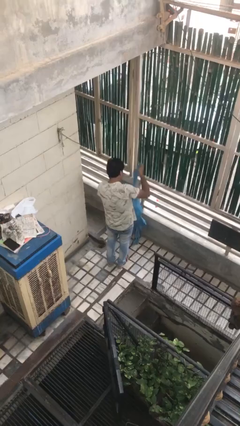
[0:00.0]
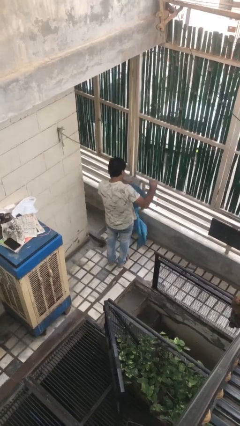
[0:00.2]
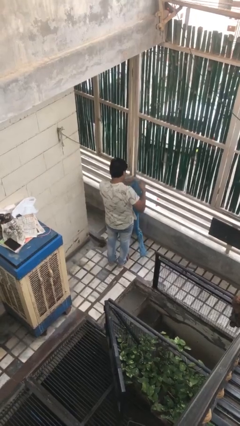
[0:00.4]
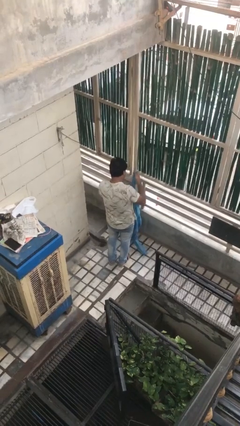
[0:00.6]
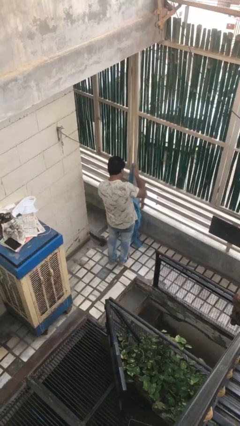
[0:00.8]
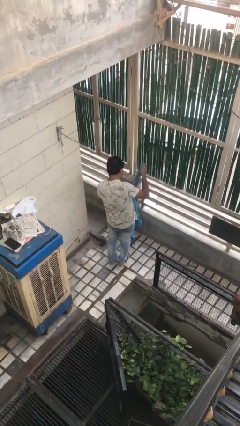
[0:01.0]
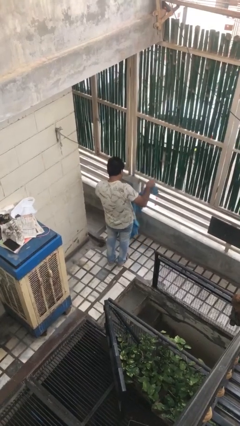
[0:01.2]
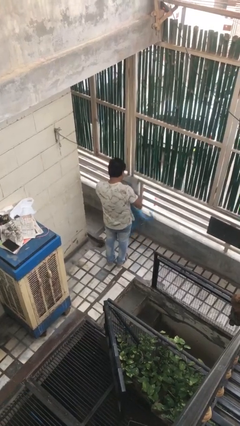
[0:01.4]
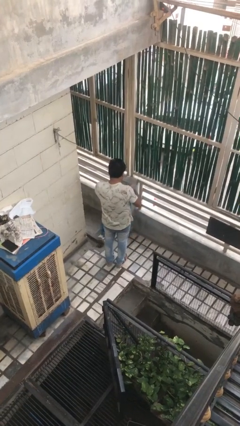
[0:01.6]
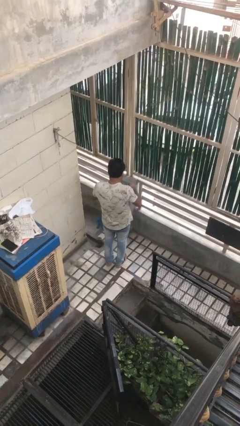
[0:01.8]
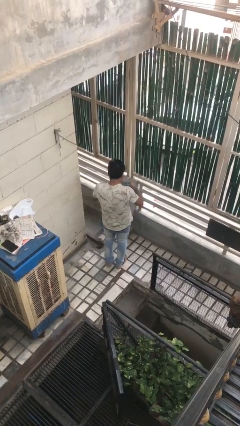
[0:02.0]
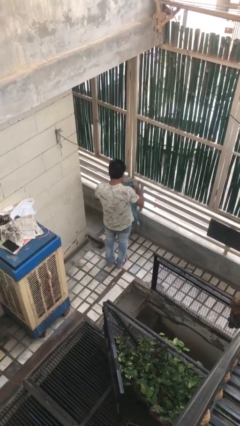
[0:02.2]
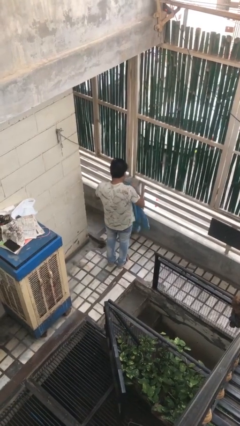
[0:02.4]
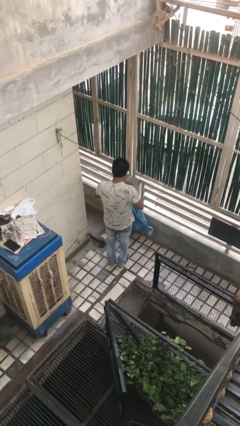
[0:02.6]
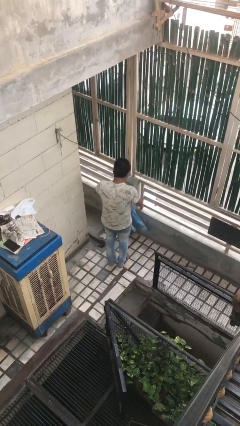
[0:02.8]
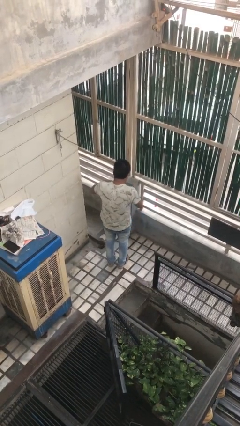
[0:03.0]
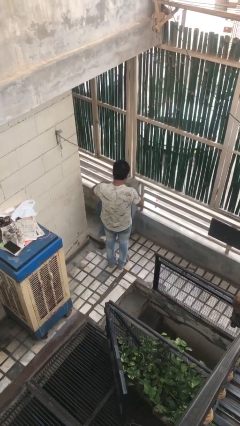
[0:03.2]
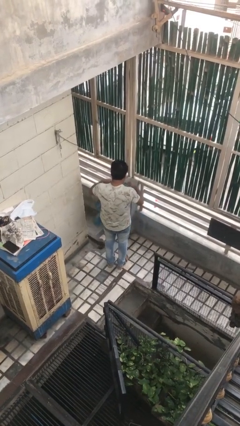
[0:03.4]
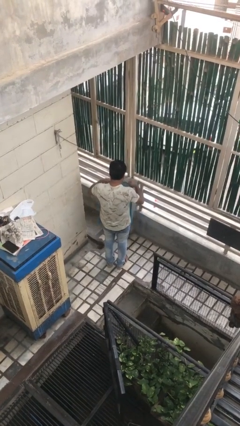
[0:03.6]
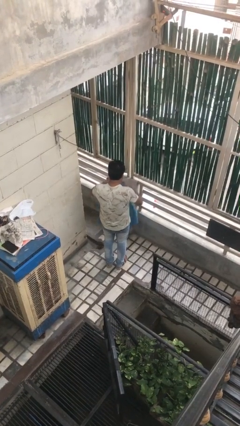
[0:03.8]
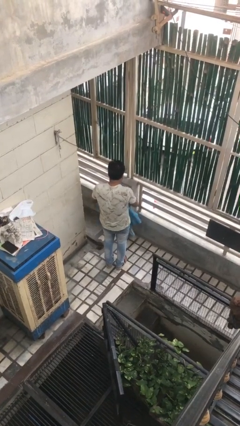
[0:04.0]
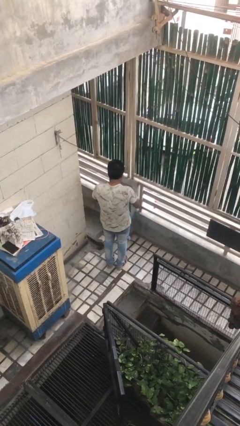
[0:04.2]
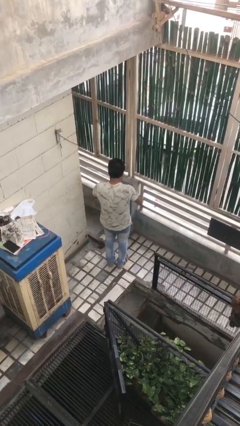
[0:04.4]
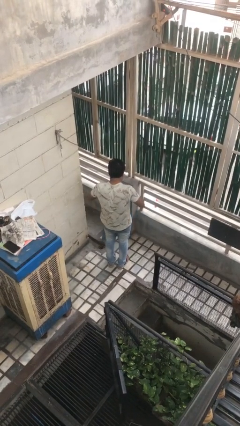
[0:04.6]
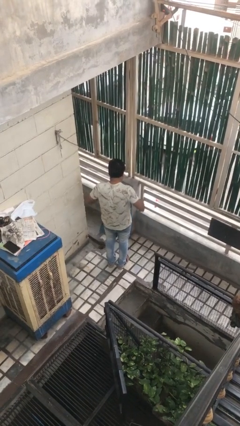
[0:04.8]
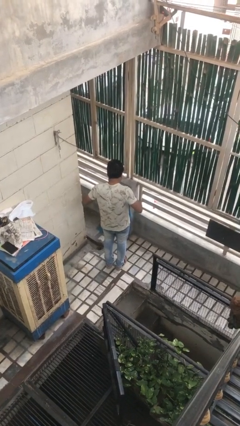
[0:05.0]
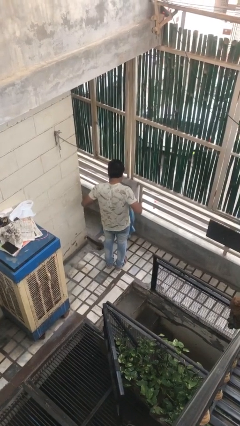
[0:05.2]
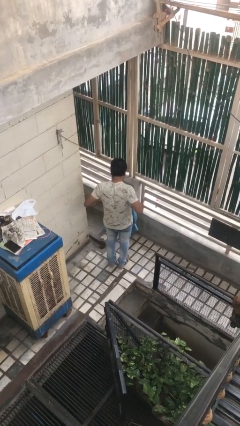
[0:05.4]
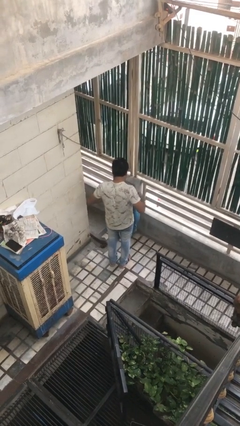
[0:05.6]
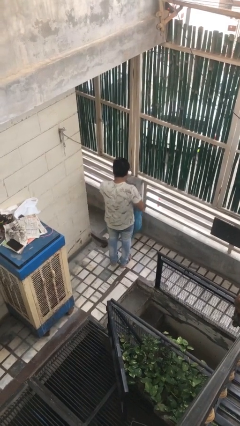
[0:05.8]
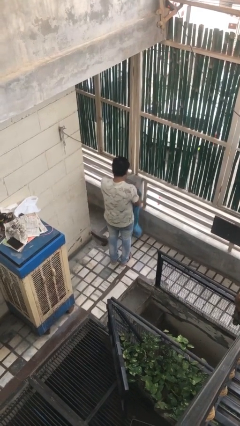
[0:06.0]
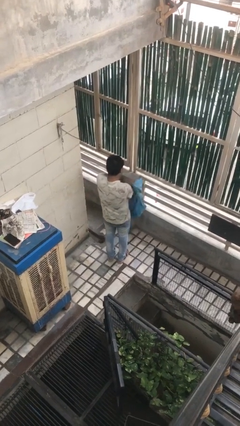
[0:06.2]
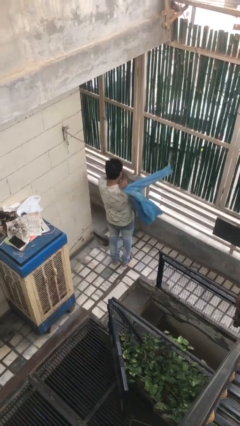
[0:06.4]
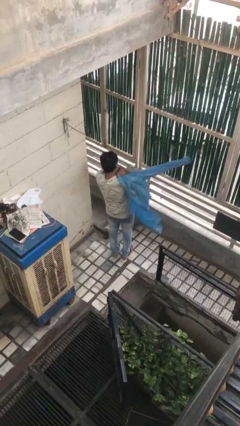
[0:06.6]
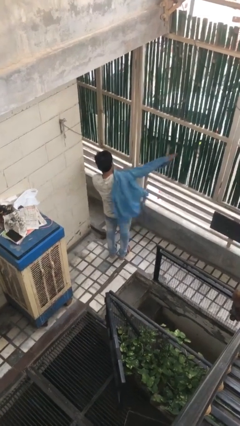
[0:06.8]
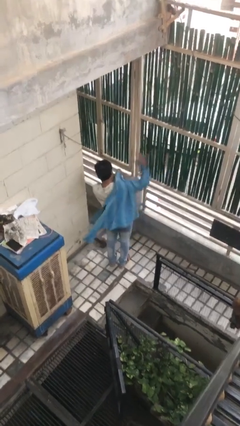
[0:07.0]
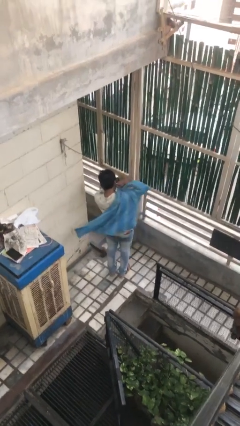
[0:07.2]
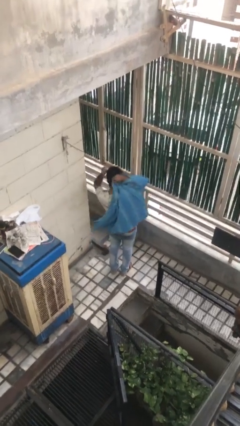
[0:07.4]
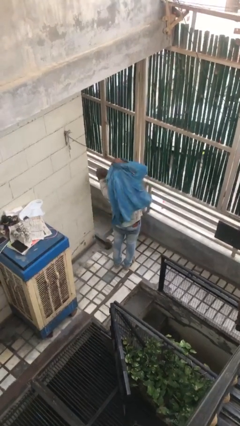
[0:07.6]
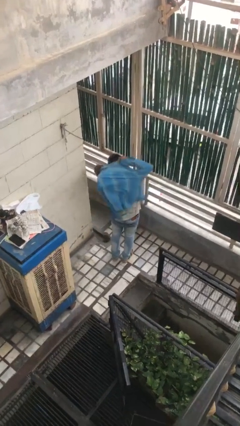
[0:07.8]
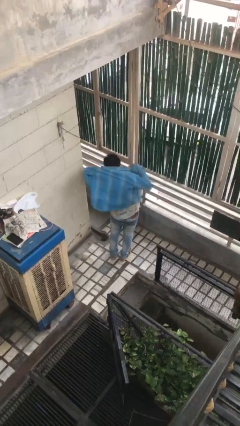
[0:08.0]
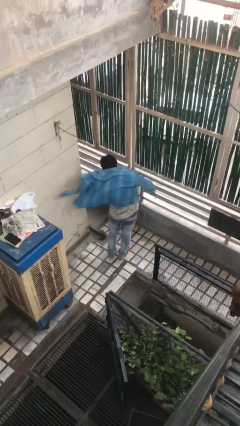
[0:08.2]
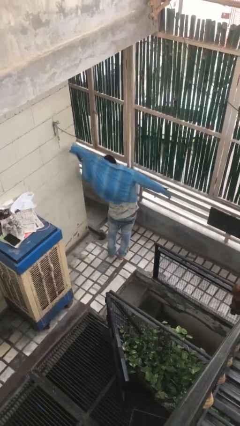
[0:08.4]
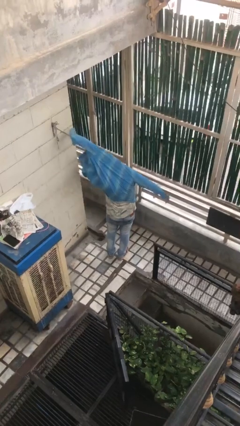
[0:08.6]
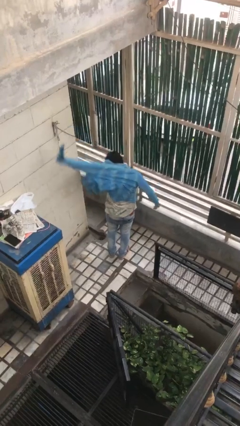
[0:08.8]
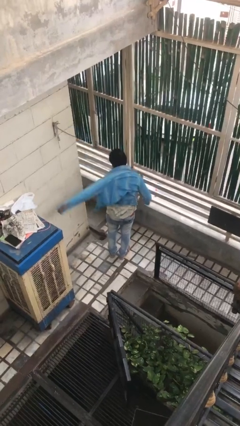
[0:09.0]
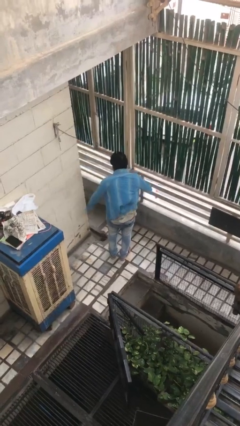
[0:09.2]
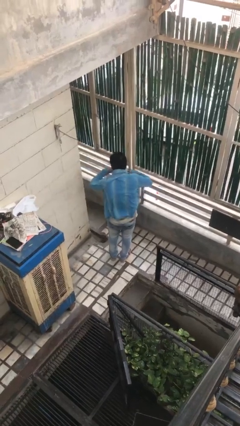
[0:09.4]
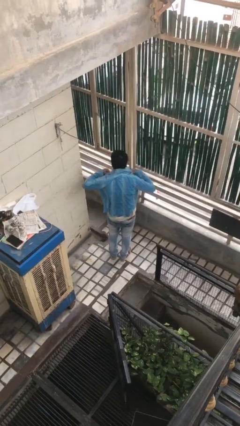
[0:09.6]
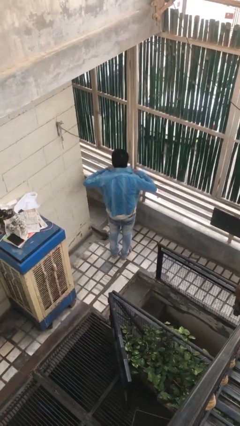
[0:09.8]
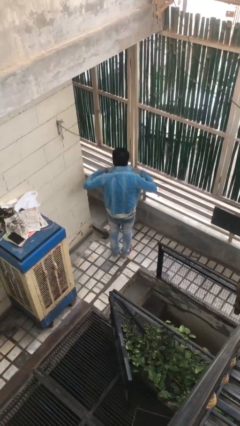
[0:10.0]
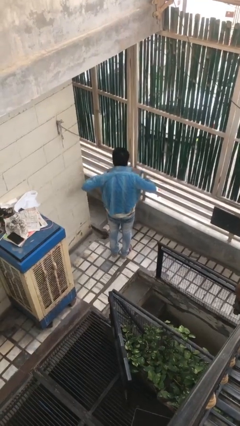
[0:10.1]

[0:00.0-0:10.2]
person puts on shirt

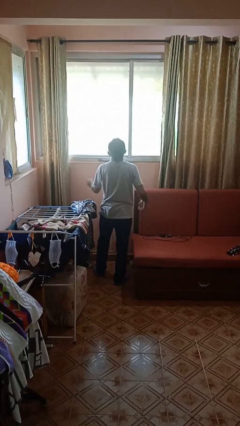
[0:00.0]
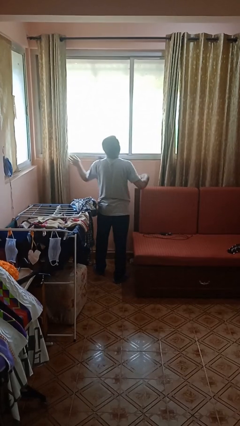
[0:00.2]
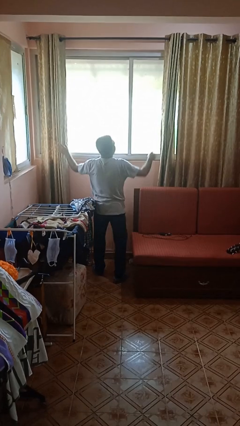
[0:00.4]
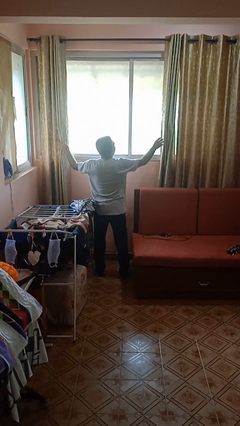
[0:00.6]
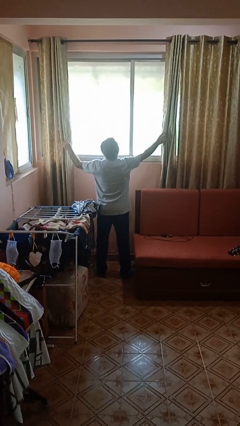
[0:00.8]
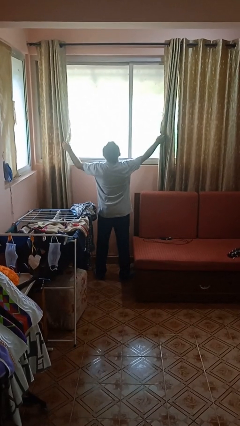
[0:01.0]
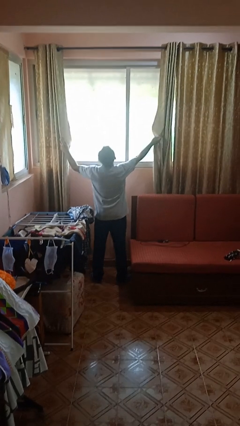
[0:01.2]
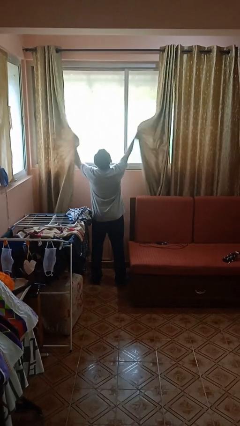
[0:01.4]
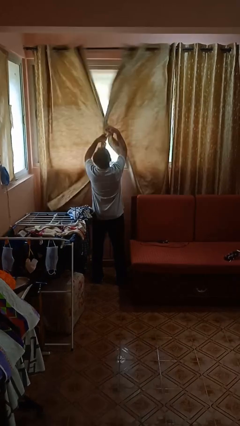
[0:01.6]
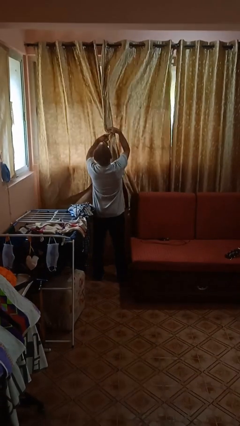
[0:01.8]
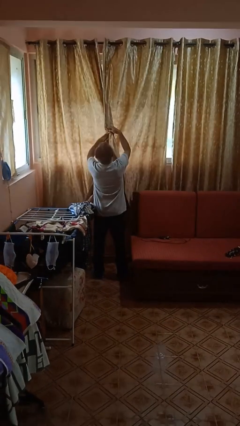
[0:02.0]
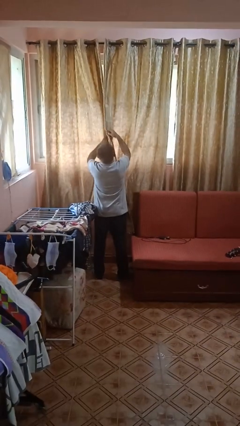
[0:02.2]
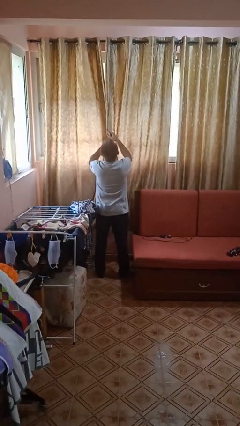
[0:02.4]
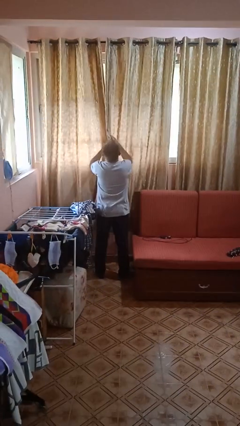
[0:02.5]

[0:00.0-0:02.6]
person closes curtains

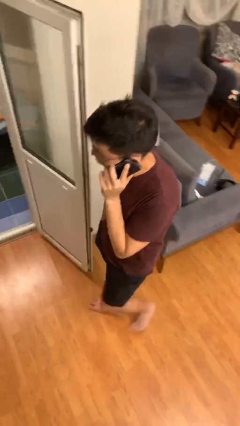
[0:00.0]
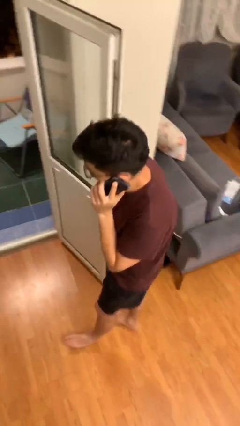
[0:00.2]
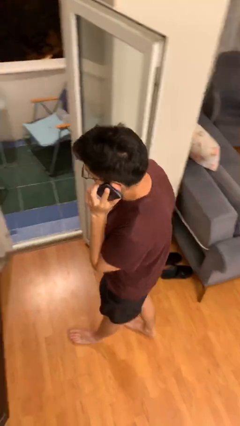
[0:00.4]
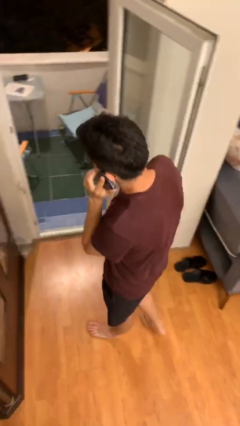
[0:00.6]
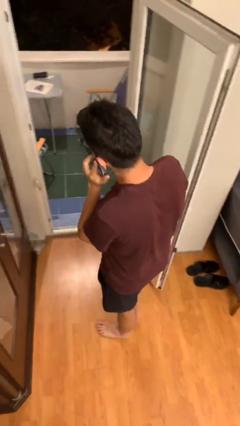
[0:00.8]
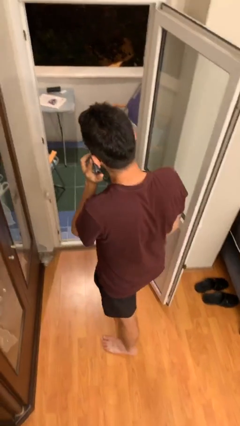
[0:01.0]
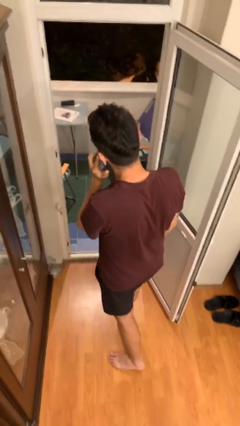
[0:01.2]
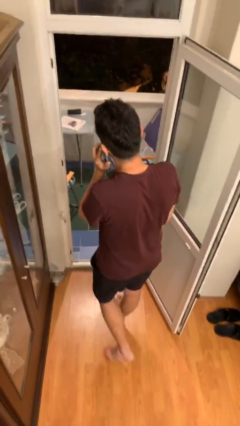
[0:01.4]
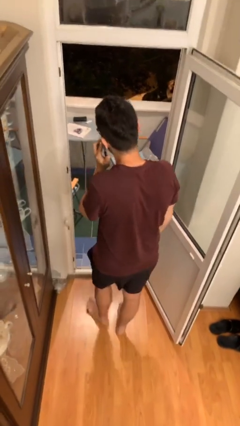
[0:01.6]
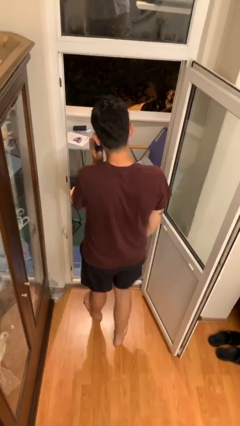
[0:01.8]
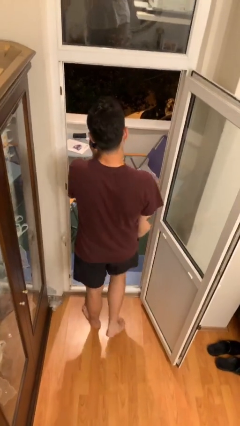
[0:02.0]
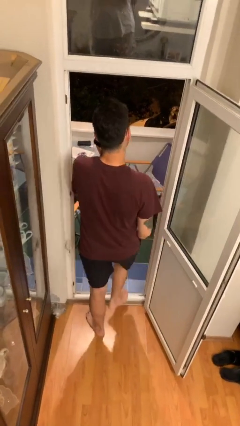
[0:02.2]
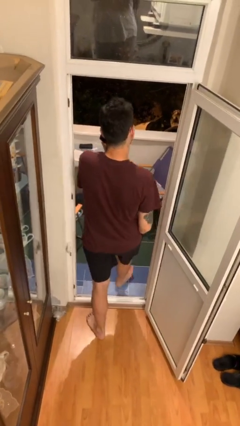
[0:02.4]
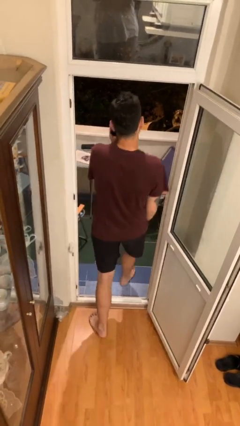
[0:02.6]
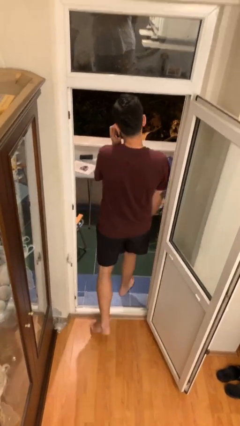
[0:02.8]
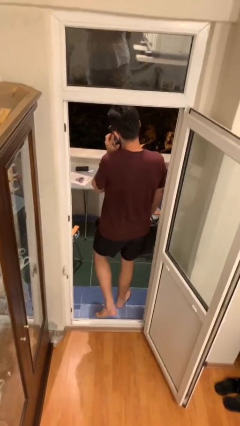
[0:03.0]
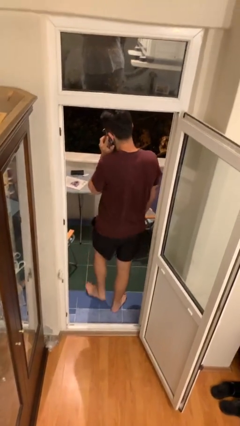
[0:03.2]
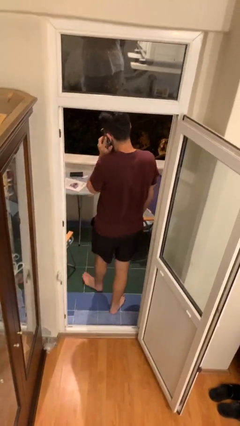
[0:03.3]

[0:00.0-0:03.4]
person exits scene through structure

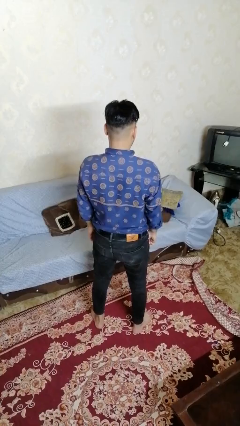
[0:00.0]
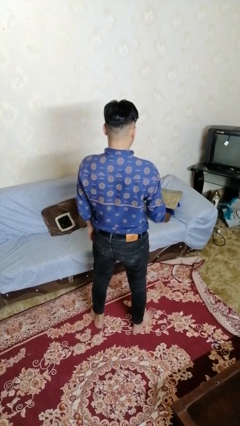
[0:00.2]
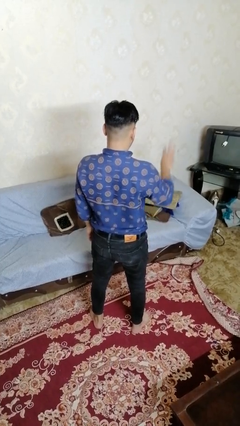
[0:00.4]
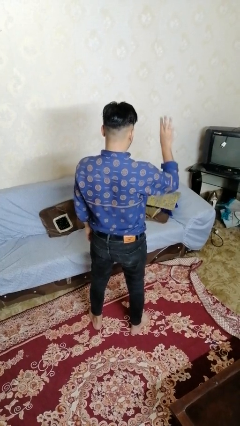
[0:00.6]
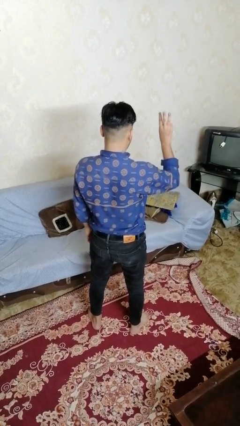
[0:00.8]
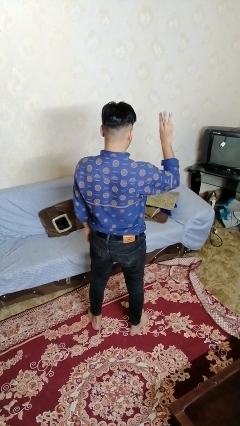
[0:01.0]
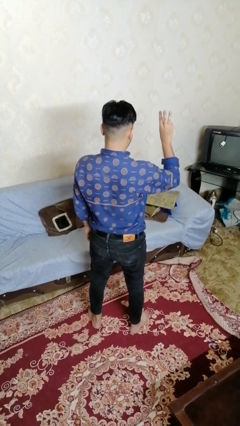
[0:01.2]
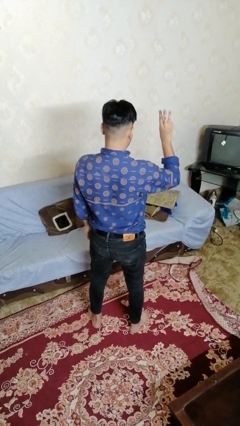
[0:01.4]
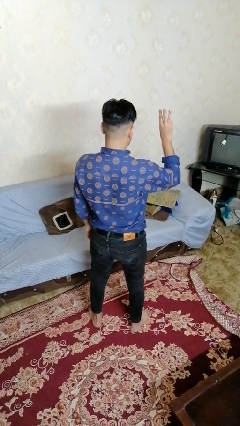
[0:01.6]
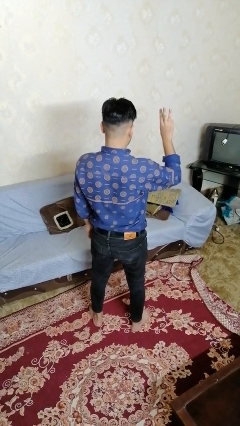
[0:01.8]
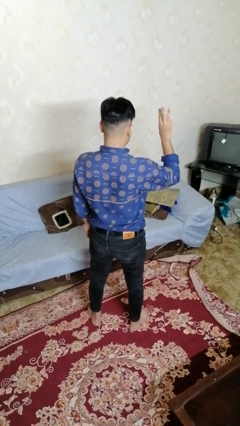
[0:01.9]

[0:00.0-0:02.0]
person gestures number three
